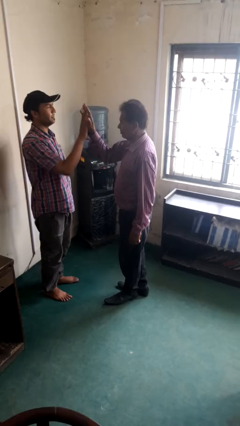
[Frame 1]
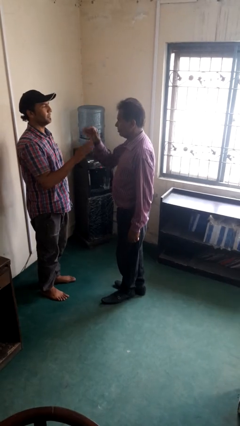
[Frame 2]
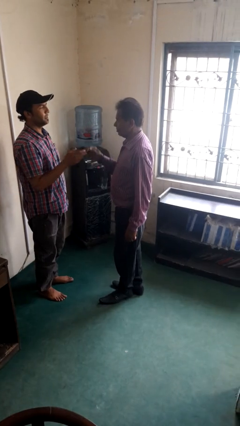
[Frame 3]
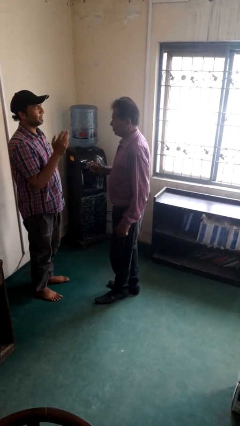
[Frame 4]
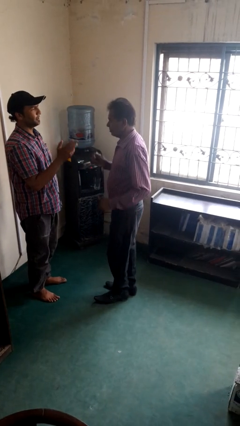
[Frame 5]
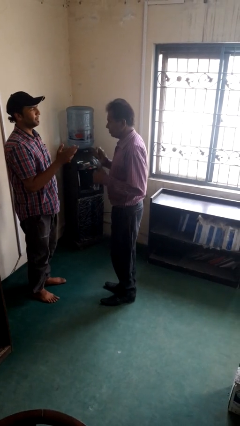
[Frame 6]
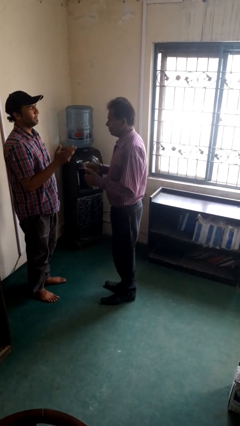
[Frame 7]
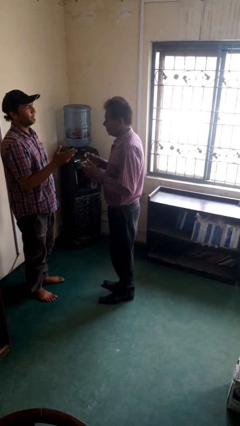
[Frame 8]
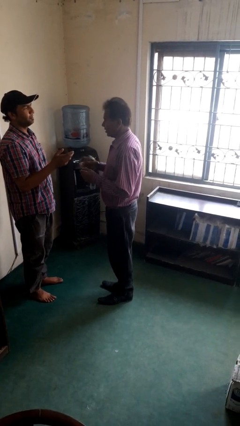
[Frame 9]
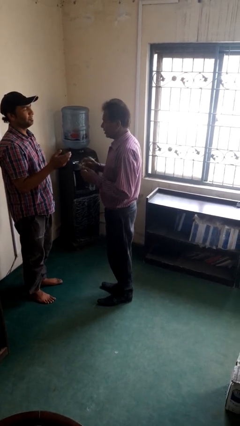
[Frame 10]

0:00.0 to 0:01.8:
person highfives hand

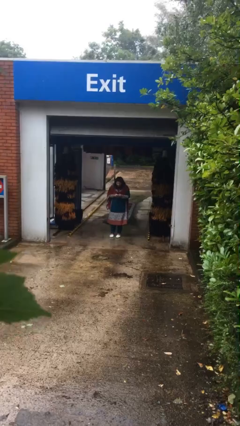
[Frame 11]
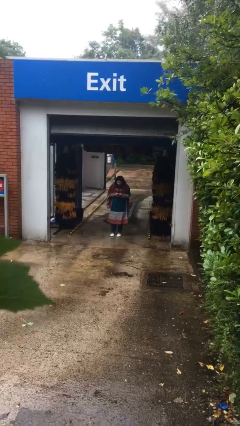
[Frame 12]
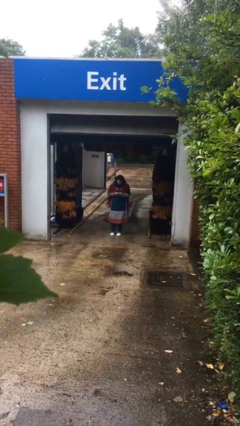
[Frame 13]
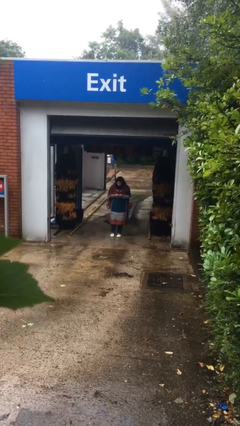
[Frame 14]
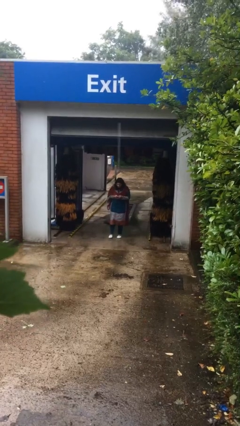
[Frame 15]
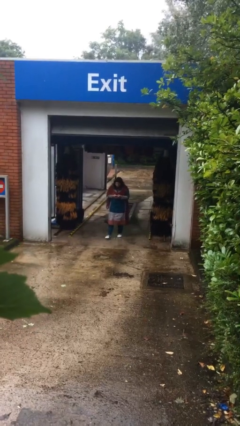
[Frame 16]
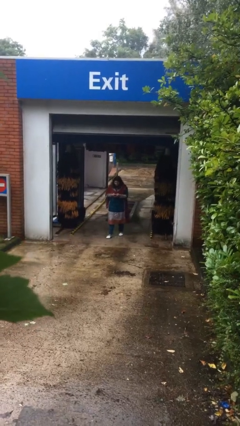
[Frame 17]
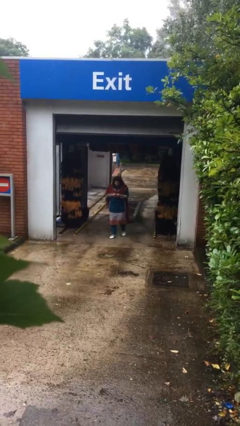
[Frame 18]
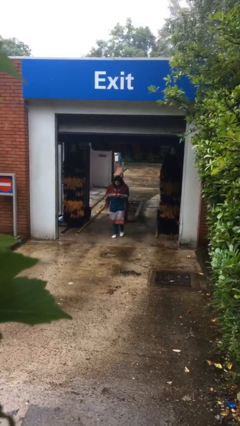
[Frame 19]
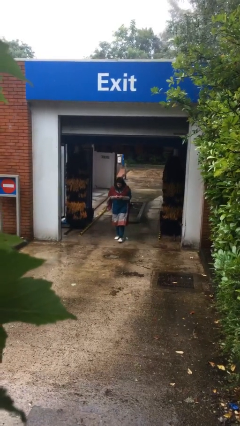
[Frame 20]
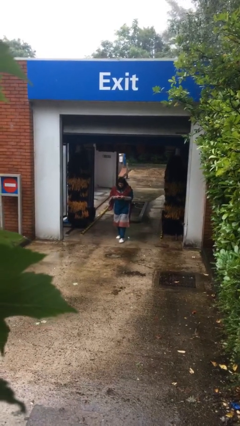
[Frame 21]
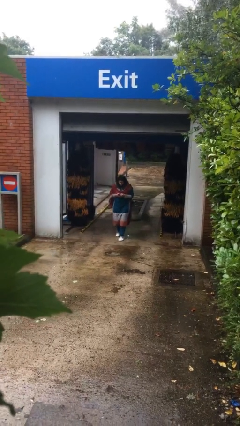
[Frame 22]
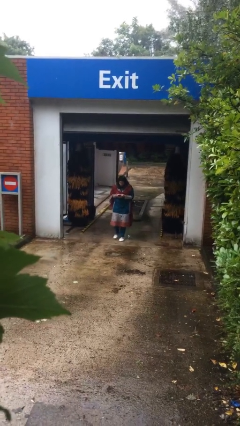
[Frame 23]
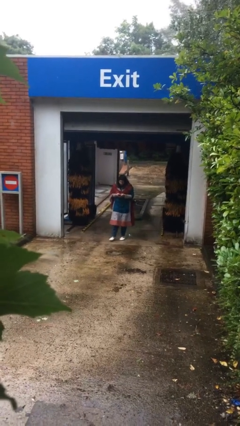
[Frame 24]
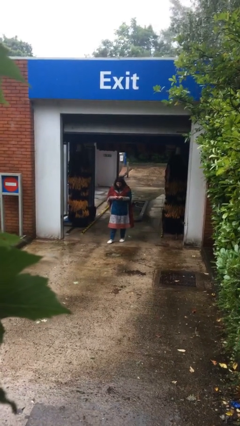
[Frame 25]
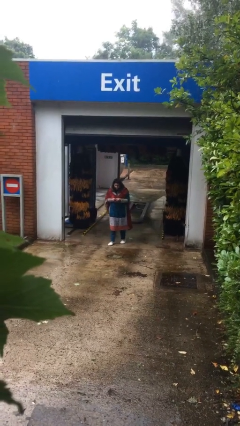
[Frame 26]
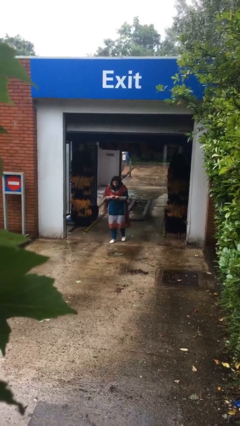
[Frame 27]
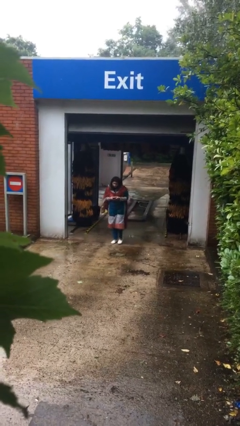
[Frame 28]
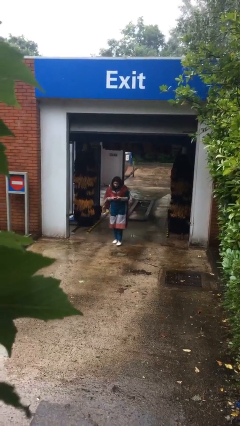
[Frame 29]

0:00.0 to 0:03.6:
person texts on phone

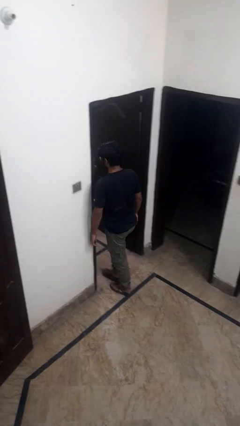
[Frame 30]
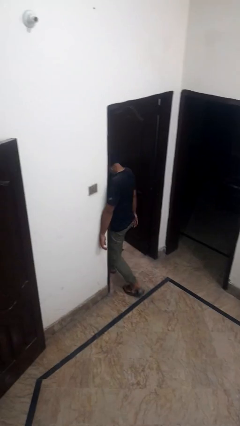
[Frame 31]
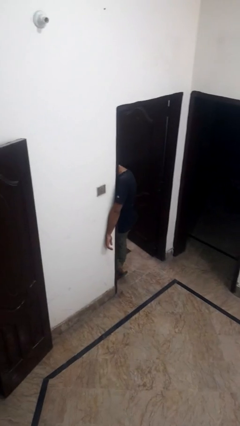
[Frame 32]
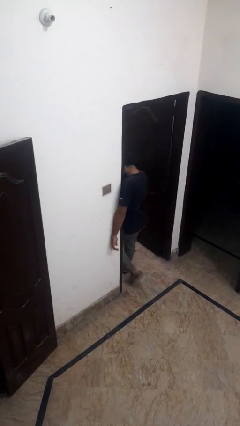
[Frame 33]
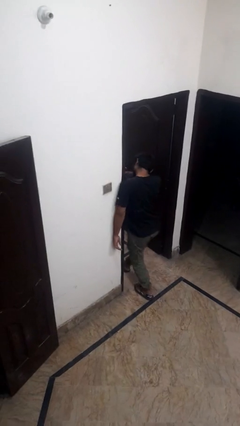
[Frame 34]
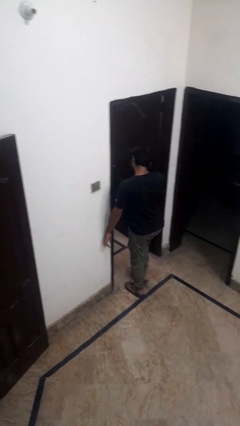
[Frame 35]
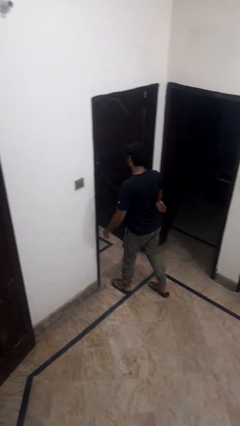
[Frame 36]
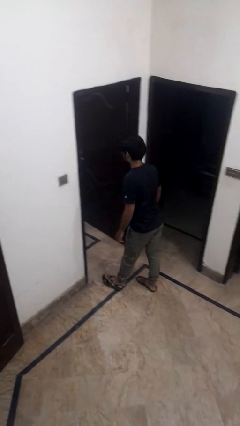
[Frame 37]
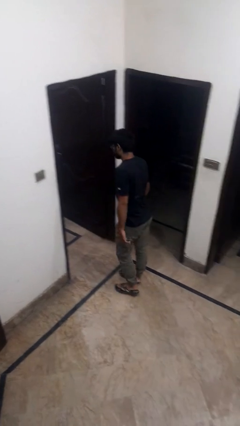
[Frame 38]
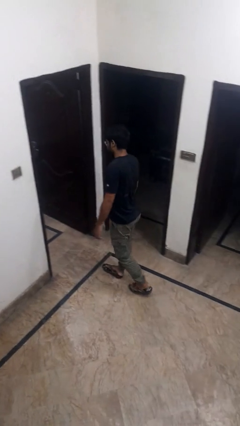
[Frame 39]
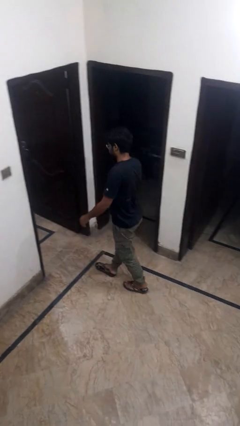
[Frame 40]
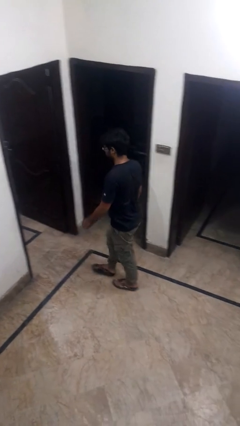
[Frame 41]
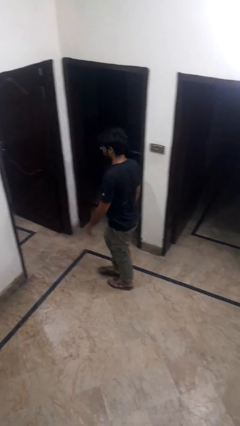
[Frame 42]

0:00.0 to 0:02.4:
person bumps into wall

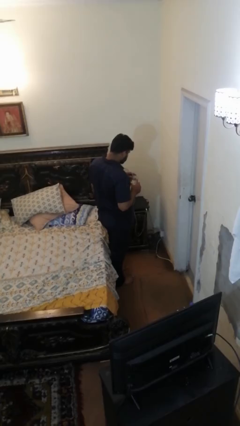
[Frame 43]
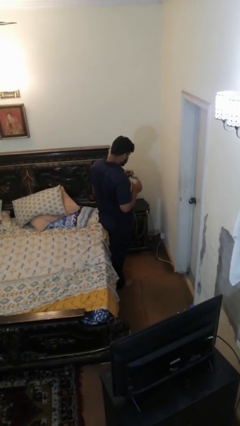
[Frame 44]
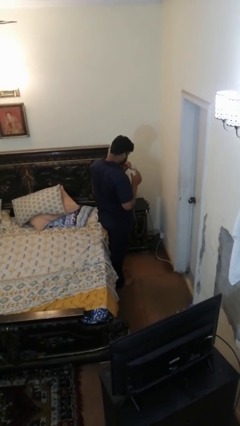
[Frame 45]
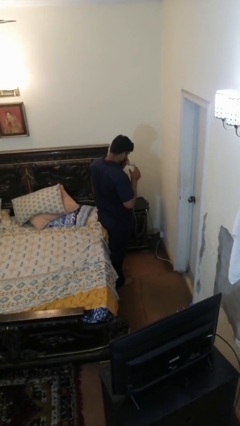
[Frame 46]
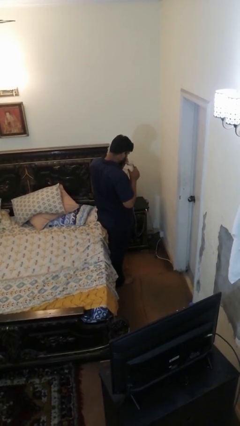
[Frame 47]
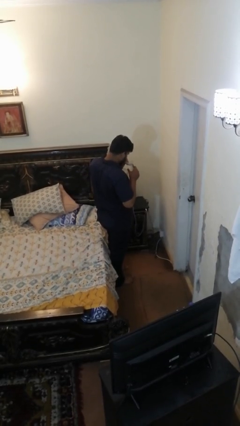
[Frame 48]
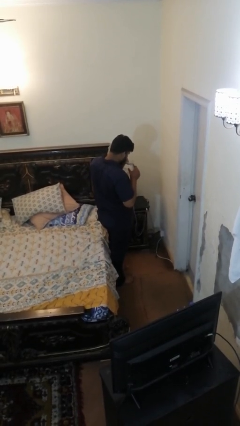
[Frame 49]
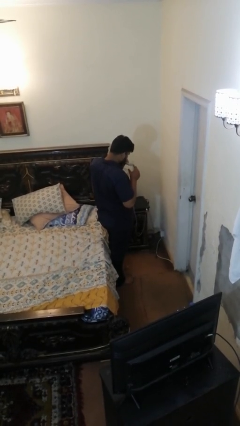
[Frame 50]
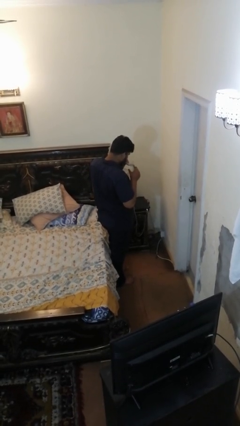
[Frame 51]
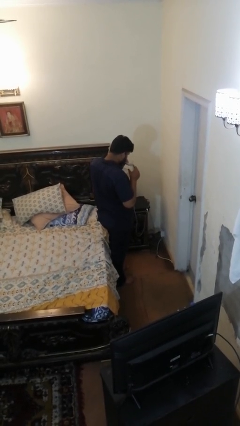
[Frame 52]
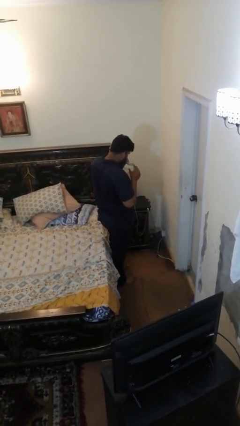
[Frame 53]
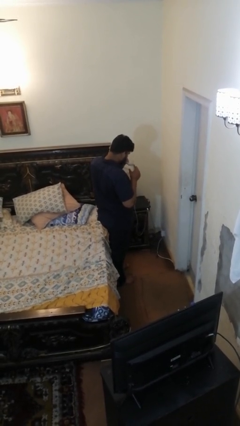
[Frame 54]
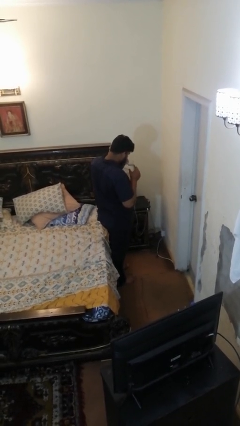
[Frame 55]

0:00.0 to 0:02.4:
person drinks from straw

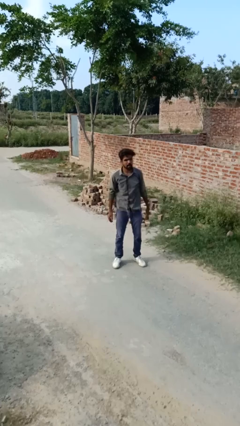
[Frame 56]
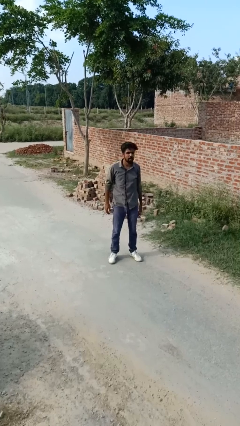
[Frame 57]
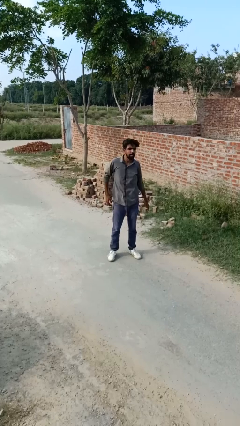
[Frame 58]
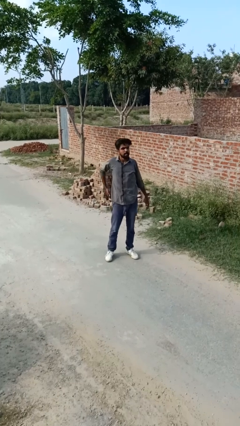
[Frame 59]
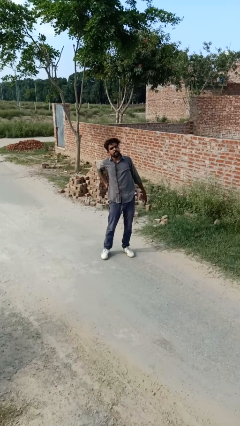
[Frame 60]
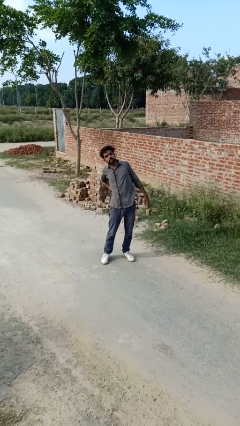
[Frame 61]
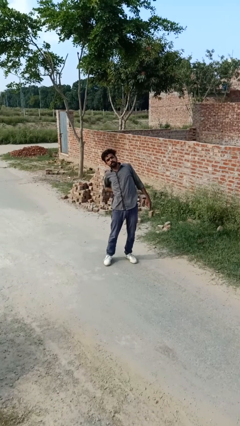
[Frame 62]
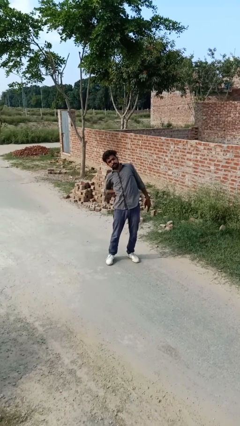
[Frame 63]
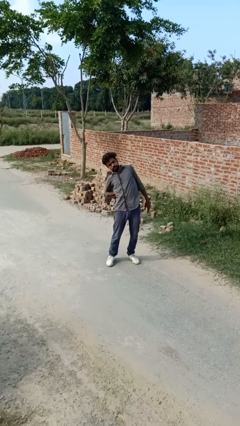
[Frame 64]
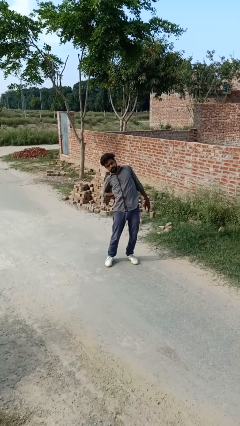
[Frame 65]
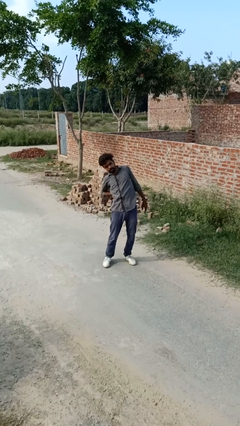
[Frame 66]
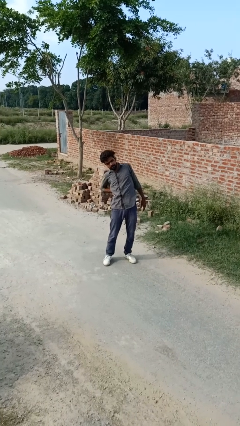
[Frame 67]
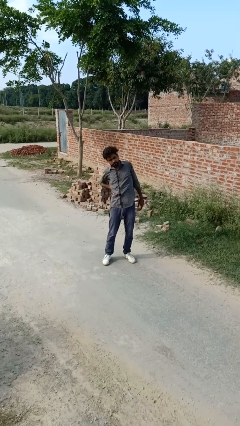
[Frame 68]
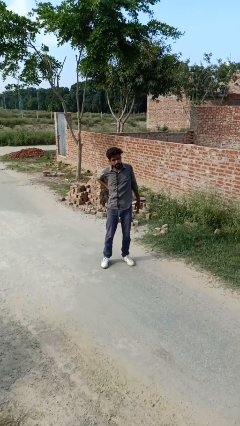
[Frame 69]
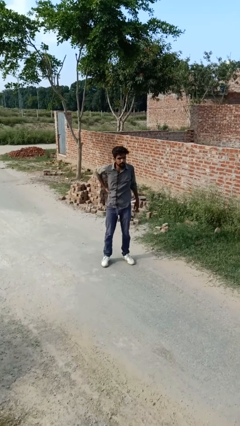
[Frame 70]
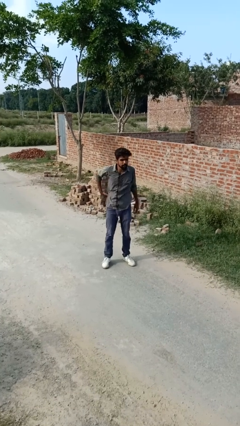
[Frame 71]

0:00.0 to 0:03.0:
person stretches back

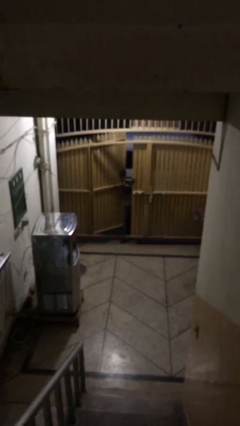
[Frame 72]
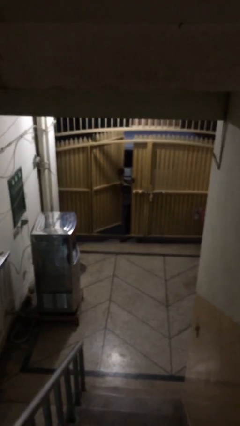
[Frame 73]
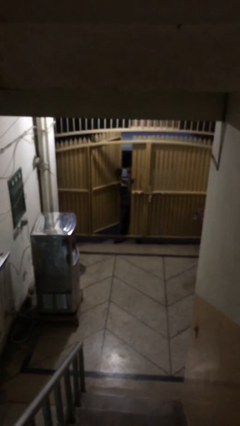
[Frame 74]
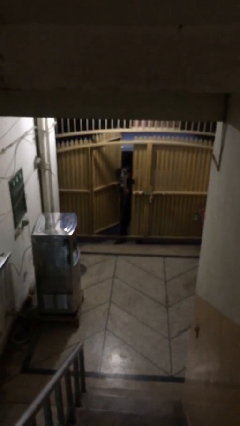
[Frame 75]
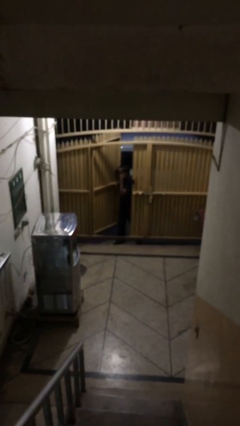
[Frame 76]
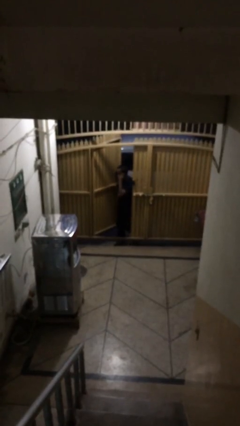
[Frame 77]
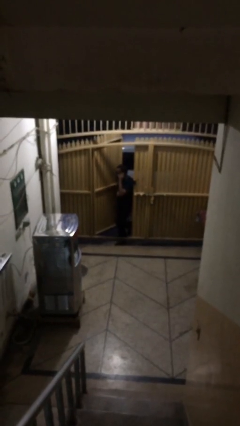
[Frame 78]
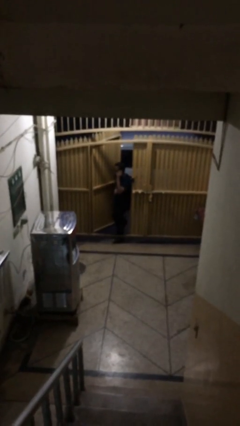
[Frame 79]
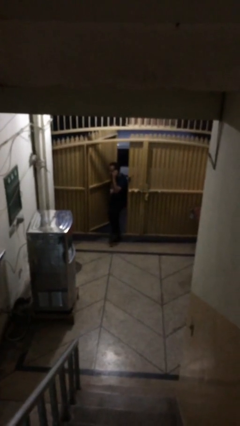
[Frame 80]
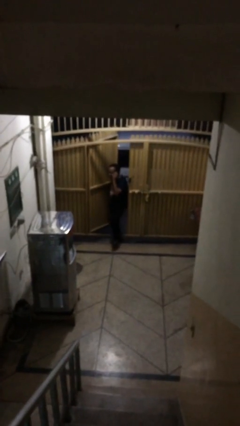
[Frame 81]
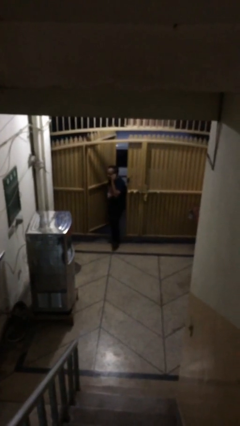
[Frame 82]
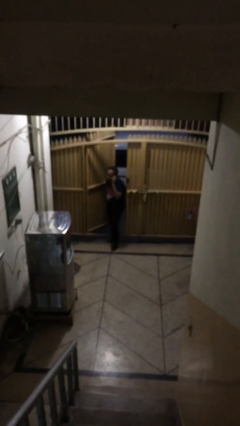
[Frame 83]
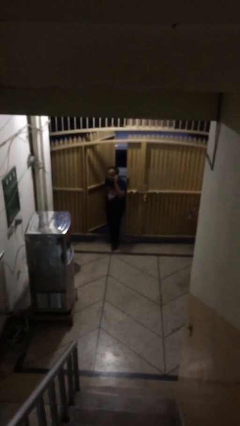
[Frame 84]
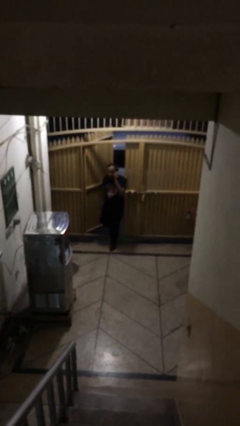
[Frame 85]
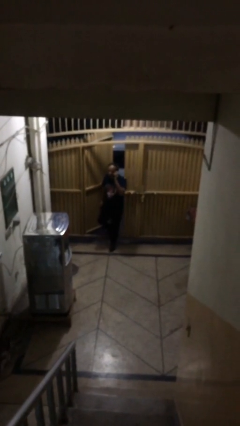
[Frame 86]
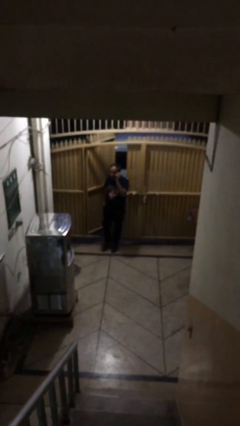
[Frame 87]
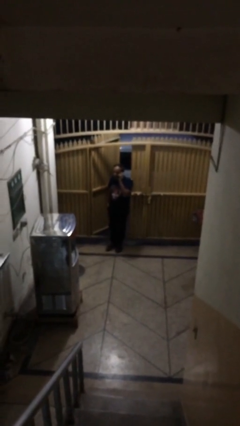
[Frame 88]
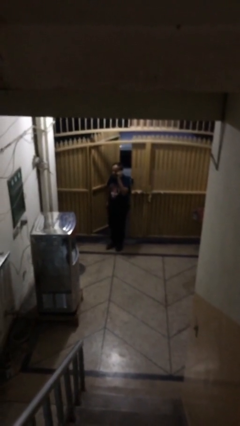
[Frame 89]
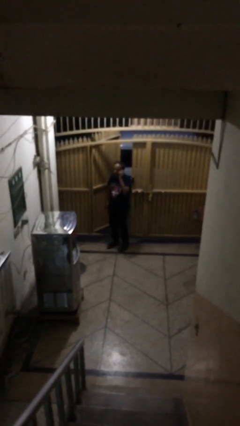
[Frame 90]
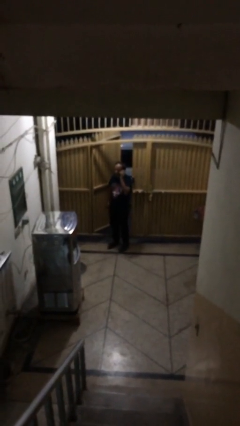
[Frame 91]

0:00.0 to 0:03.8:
person enters scene through structure
